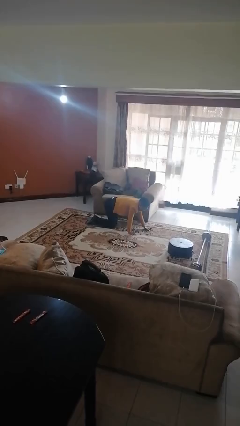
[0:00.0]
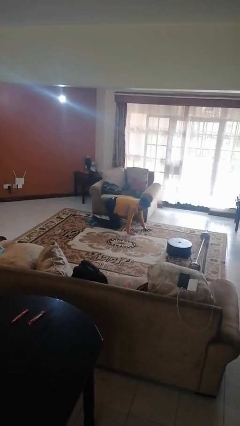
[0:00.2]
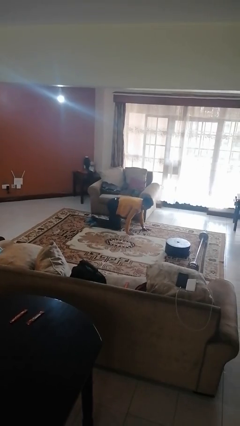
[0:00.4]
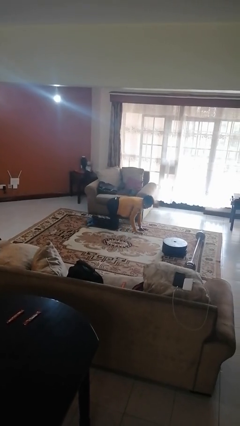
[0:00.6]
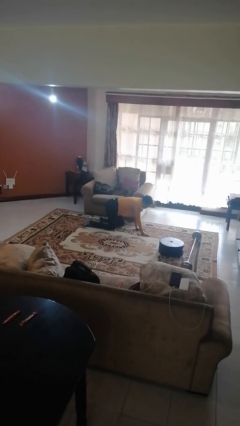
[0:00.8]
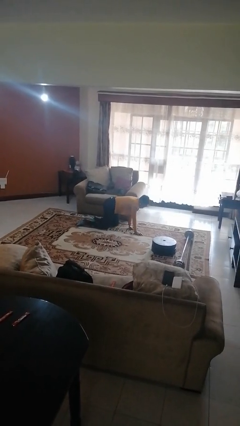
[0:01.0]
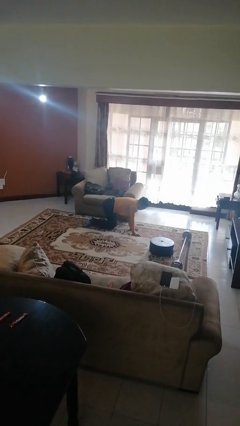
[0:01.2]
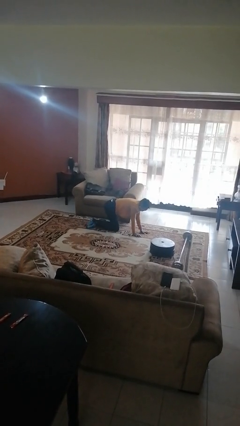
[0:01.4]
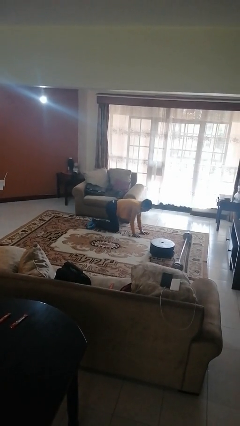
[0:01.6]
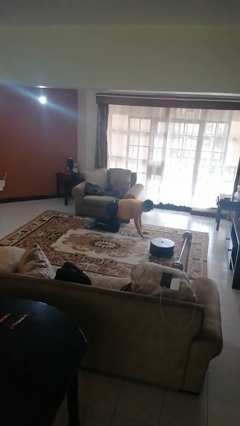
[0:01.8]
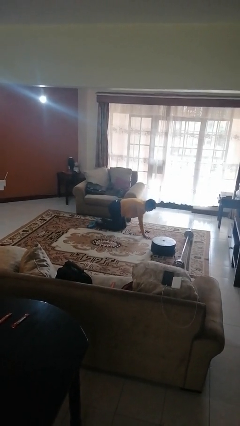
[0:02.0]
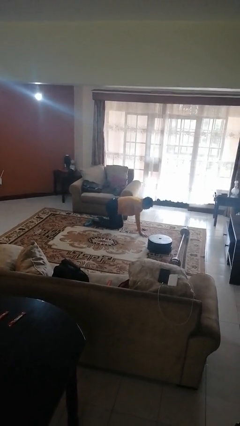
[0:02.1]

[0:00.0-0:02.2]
person crawls

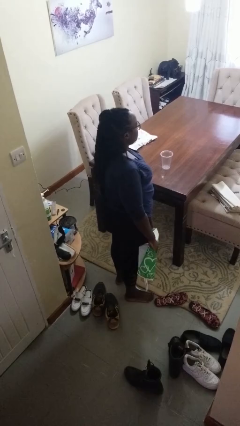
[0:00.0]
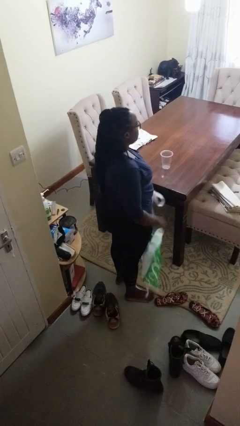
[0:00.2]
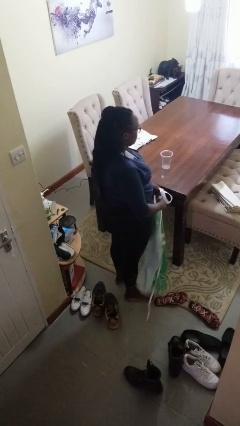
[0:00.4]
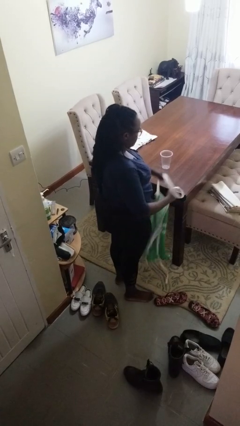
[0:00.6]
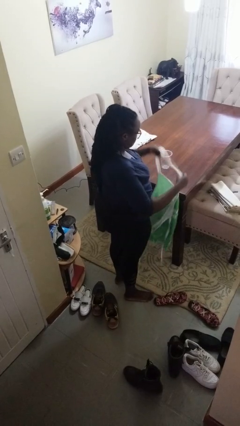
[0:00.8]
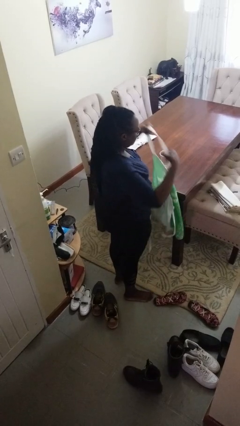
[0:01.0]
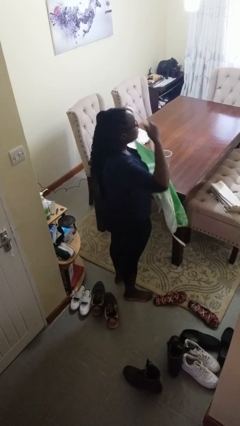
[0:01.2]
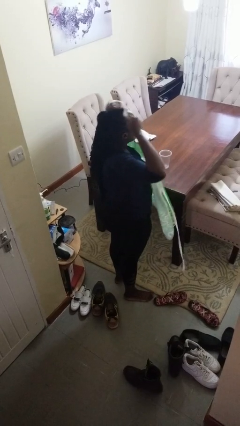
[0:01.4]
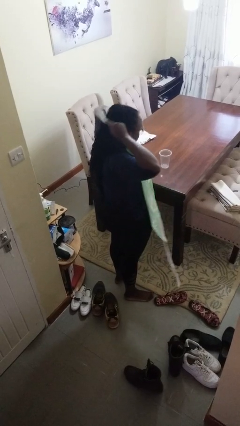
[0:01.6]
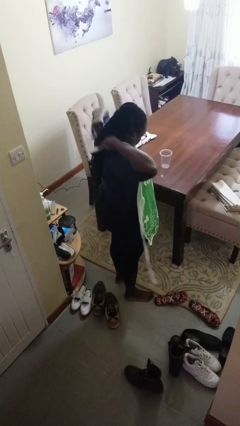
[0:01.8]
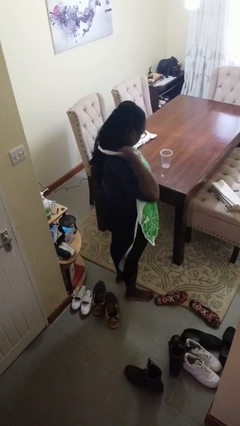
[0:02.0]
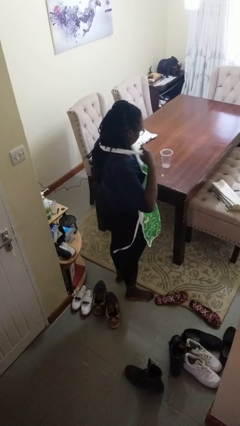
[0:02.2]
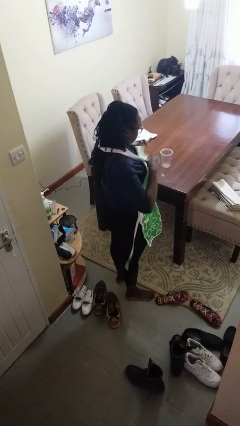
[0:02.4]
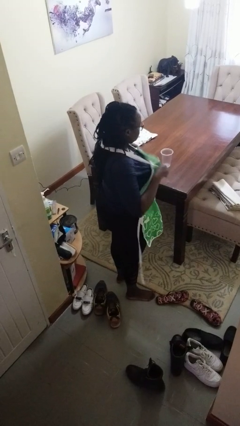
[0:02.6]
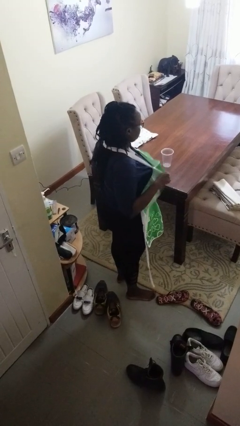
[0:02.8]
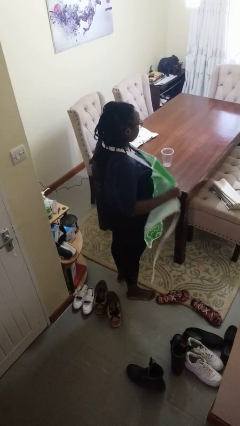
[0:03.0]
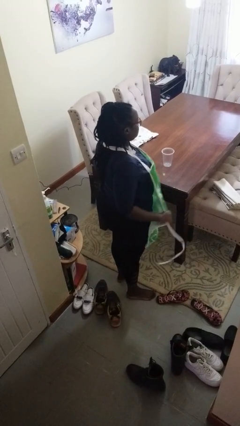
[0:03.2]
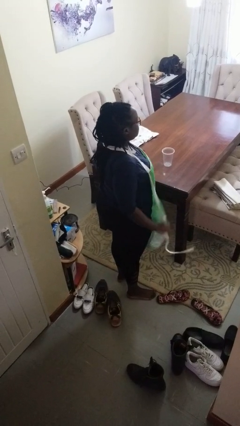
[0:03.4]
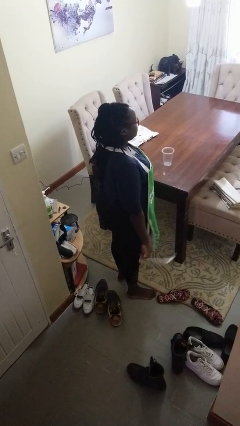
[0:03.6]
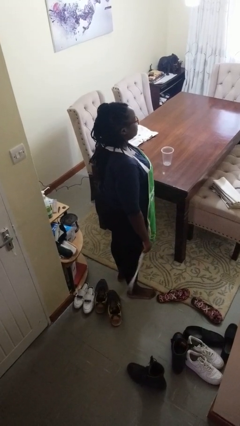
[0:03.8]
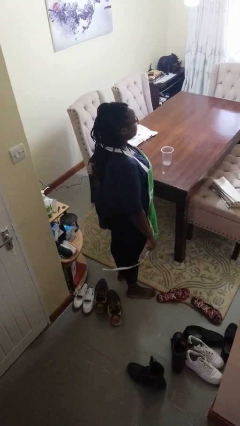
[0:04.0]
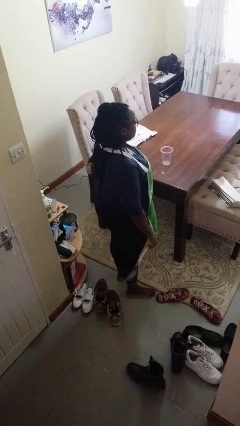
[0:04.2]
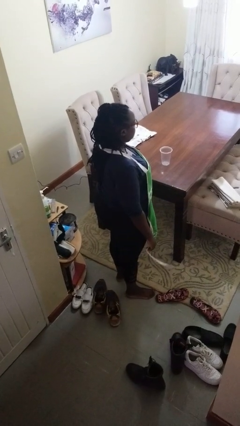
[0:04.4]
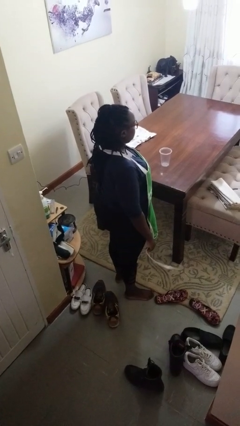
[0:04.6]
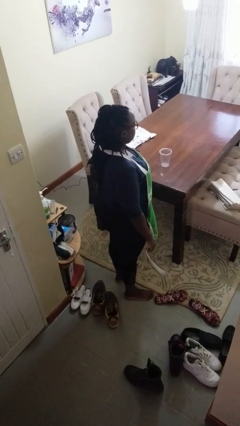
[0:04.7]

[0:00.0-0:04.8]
person puts on apron

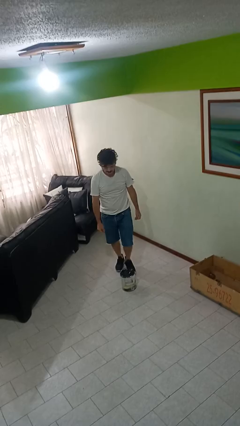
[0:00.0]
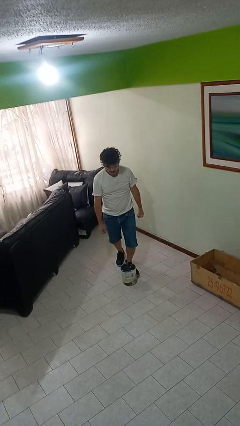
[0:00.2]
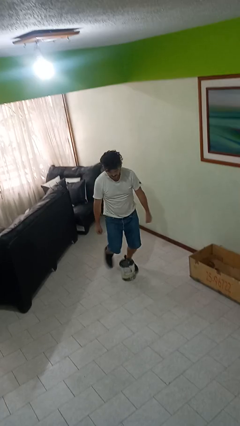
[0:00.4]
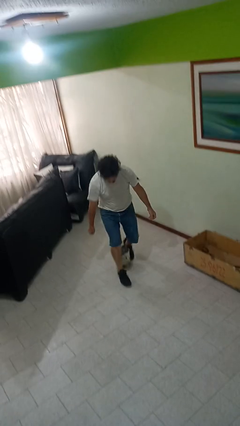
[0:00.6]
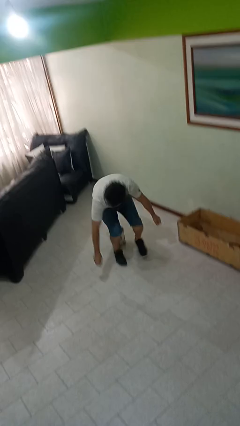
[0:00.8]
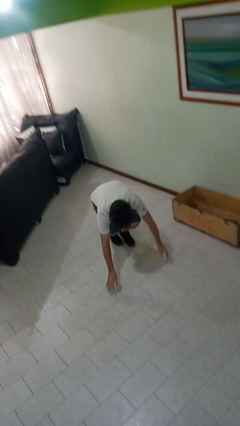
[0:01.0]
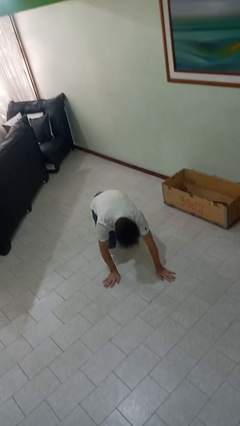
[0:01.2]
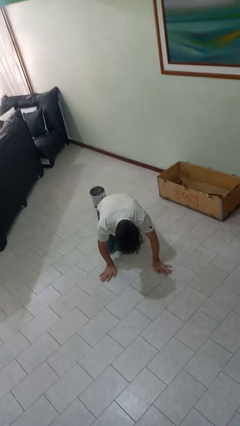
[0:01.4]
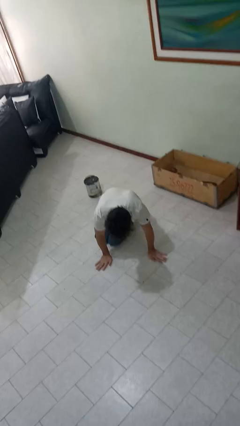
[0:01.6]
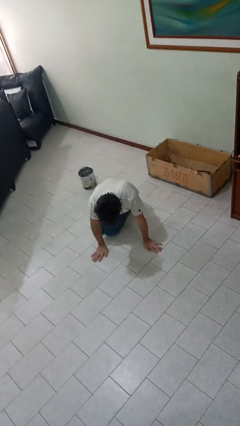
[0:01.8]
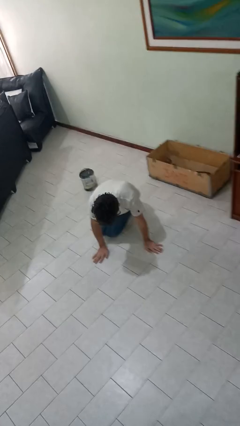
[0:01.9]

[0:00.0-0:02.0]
person trips on object on floor

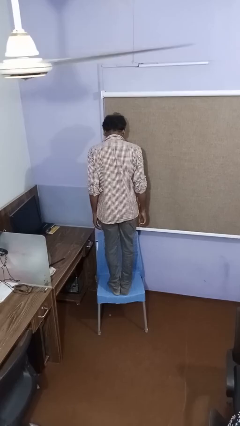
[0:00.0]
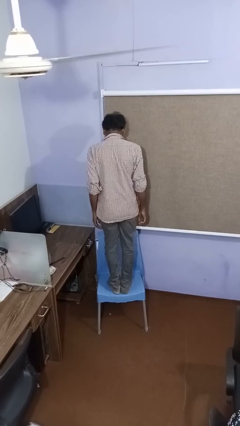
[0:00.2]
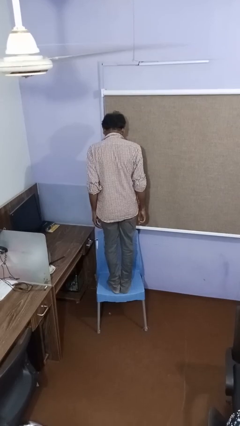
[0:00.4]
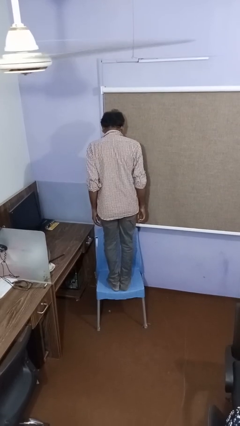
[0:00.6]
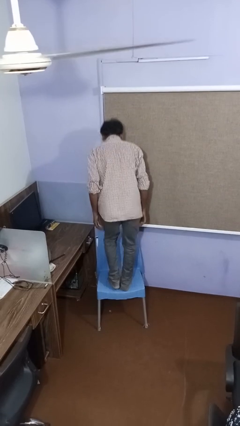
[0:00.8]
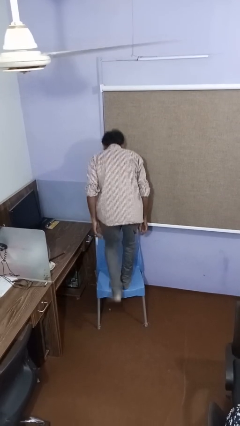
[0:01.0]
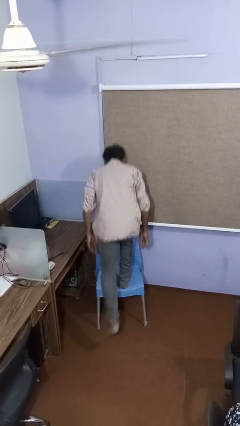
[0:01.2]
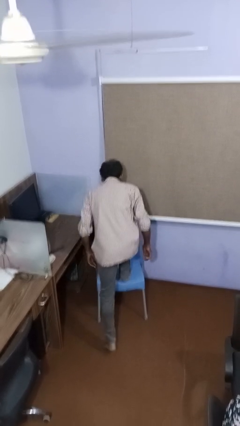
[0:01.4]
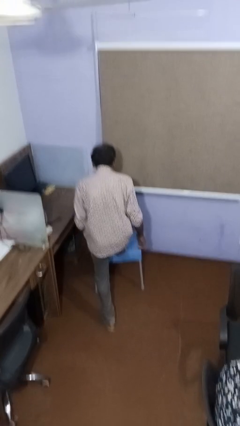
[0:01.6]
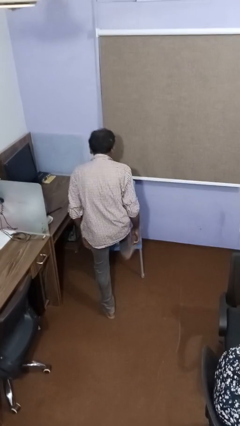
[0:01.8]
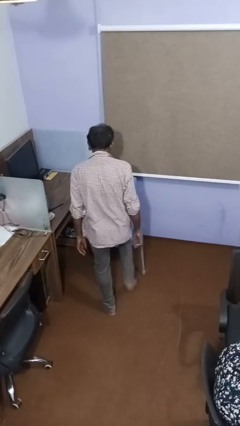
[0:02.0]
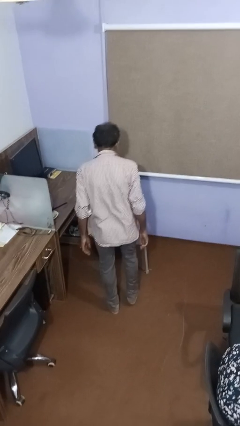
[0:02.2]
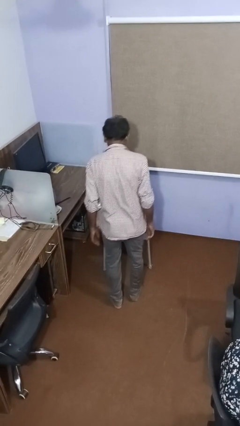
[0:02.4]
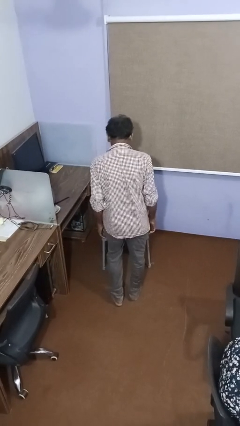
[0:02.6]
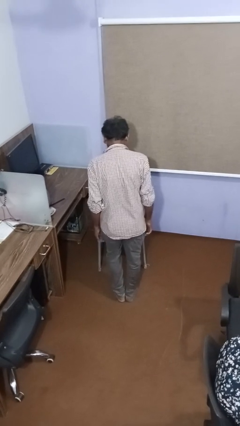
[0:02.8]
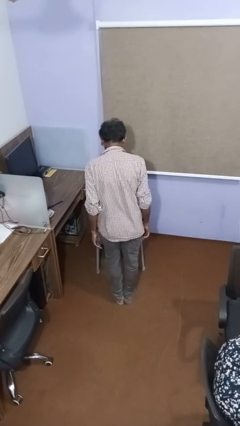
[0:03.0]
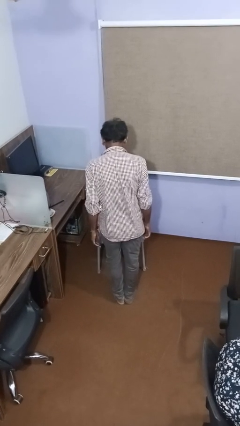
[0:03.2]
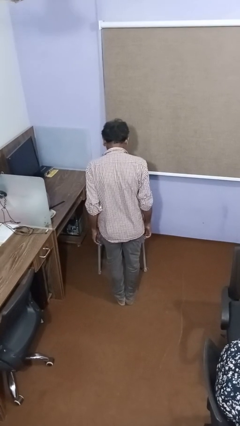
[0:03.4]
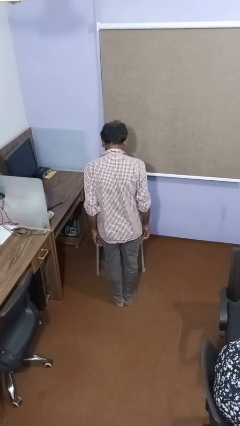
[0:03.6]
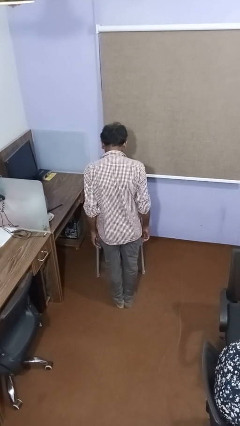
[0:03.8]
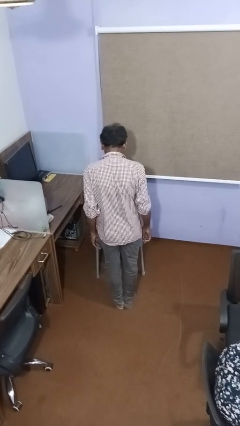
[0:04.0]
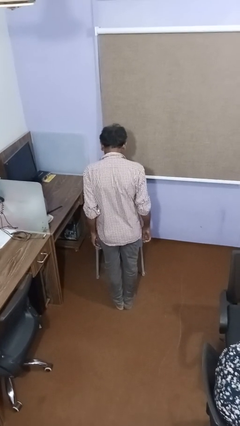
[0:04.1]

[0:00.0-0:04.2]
person climbs off chair

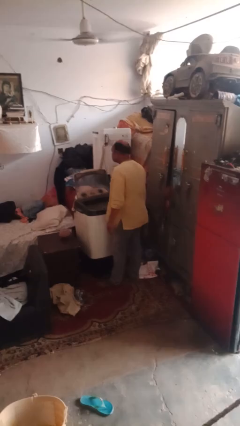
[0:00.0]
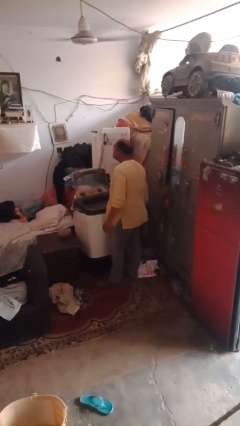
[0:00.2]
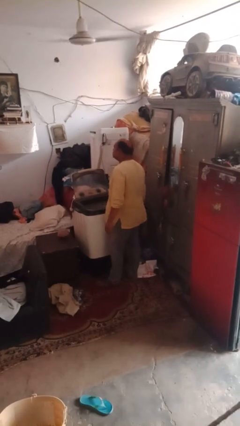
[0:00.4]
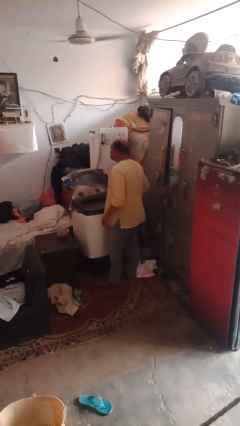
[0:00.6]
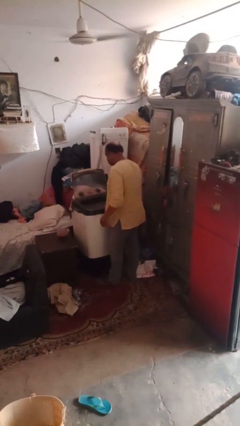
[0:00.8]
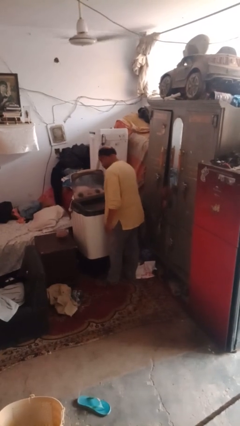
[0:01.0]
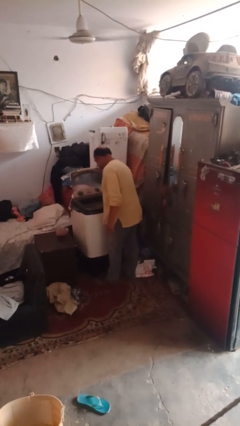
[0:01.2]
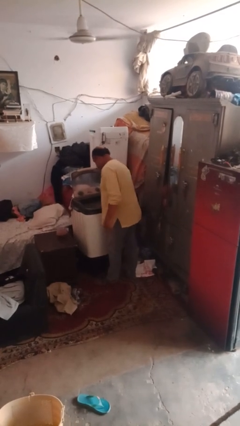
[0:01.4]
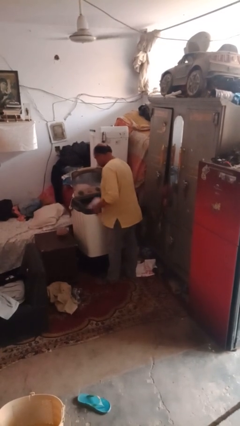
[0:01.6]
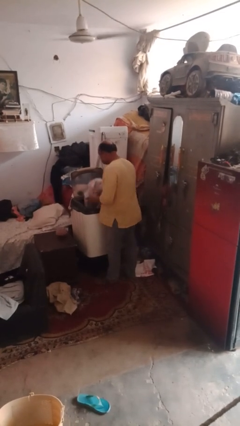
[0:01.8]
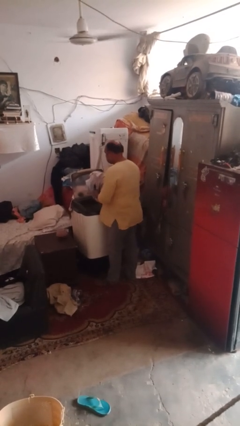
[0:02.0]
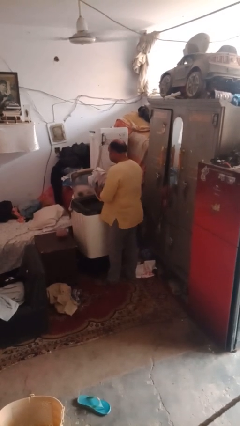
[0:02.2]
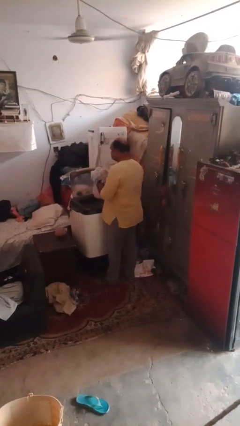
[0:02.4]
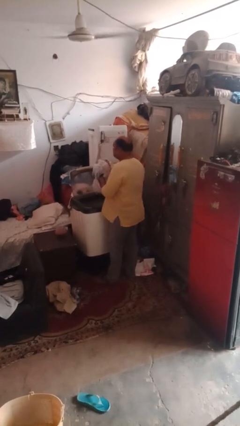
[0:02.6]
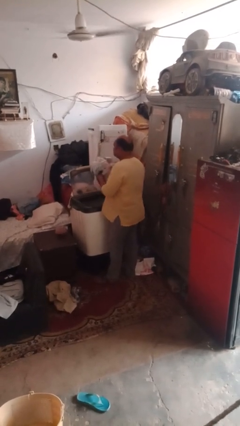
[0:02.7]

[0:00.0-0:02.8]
person unloads clotheswasher

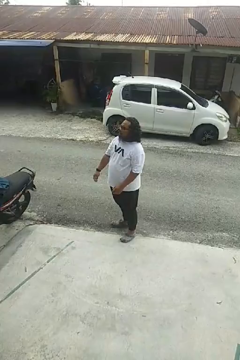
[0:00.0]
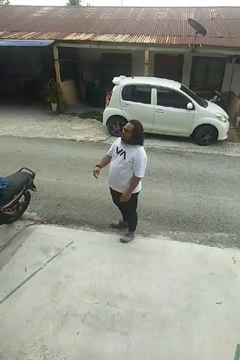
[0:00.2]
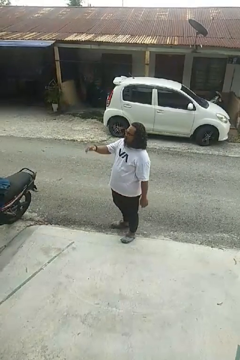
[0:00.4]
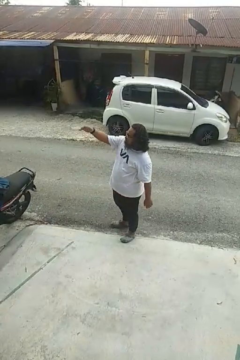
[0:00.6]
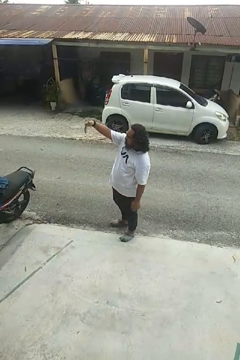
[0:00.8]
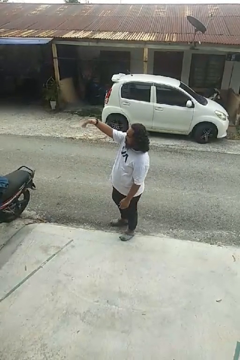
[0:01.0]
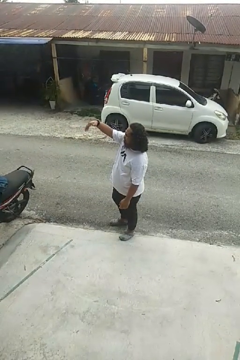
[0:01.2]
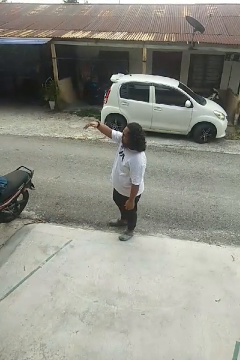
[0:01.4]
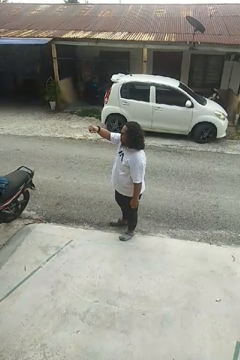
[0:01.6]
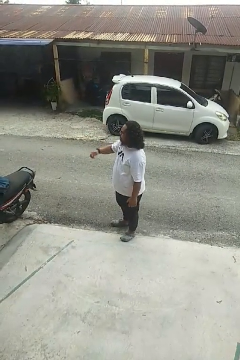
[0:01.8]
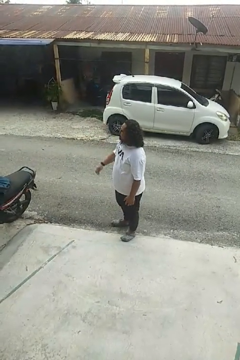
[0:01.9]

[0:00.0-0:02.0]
person gestures come here
